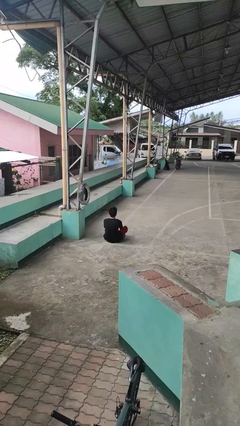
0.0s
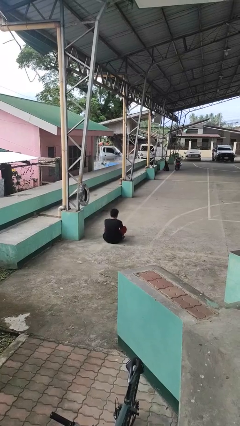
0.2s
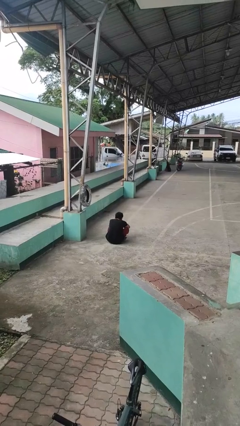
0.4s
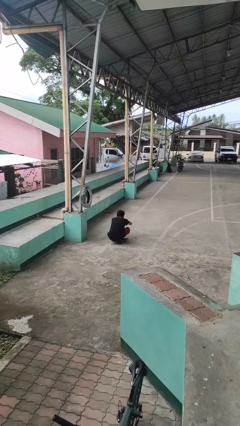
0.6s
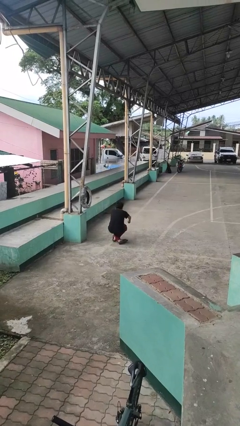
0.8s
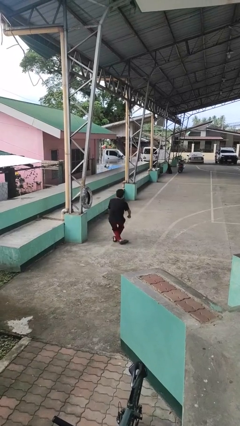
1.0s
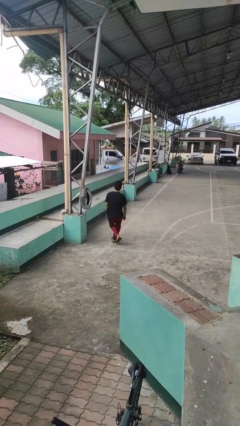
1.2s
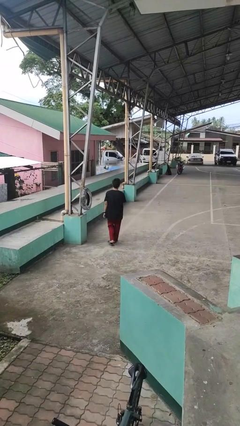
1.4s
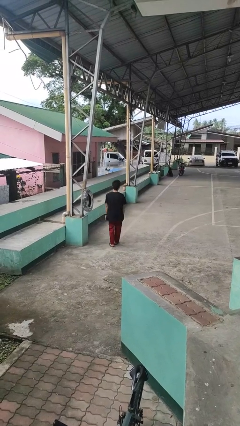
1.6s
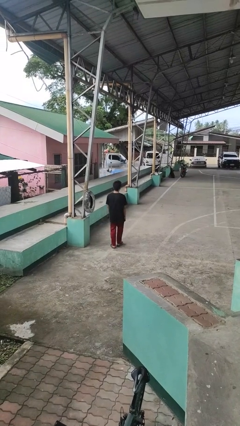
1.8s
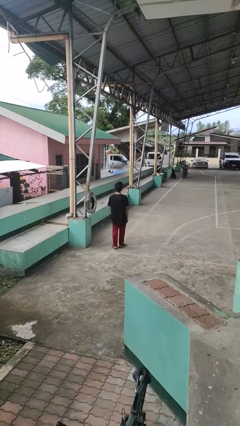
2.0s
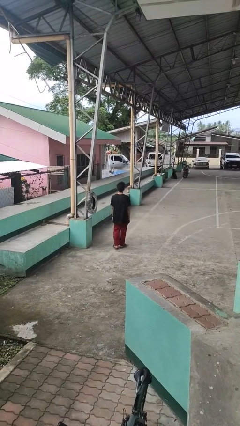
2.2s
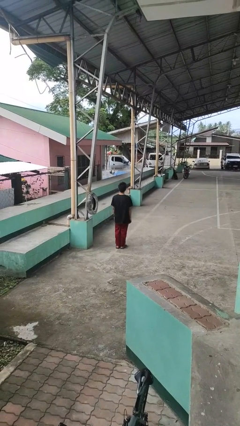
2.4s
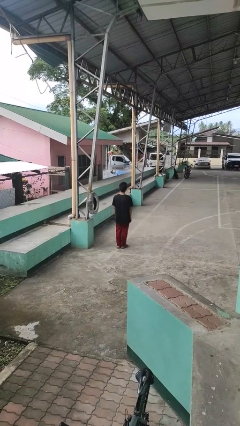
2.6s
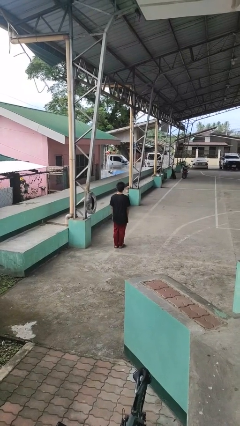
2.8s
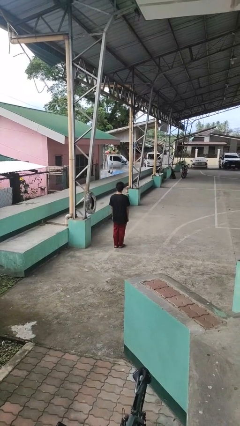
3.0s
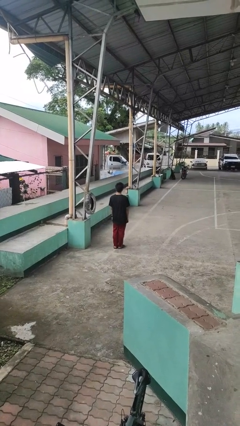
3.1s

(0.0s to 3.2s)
person stands up from floor

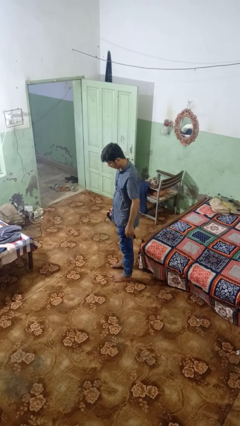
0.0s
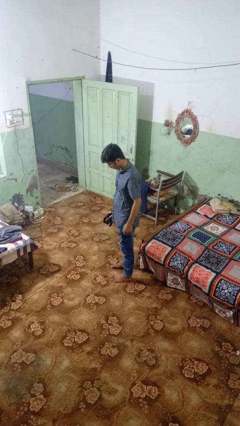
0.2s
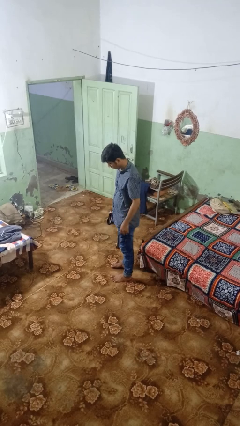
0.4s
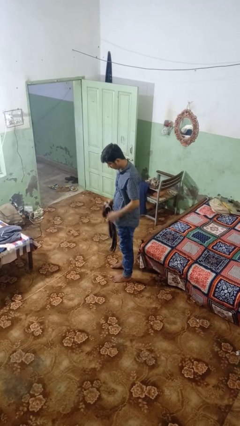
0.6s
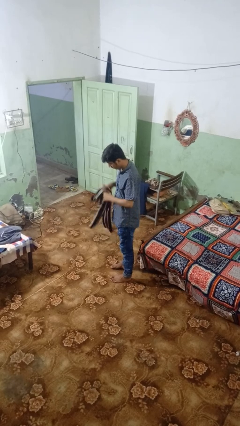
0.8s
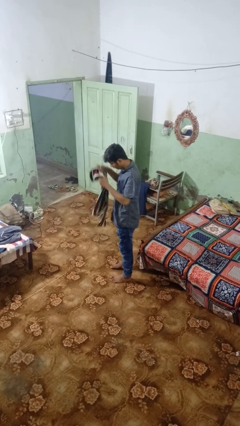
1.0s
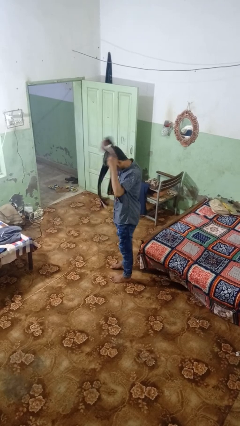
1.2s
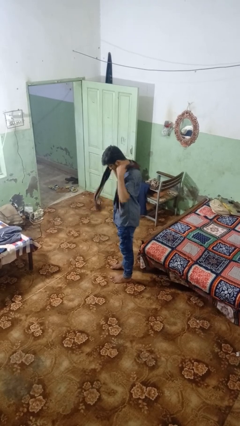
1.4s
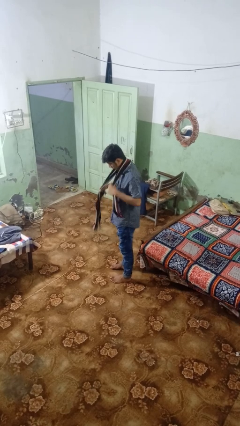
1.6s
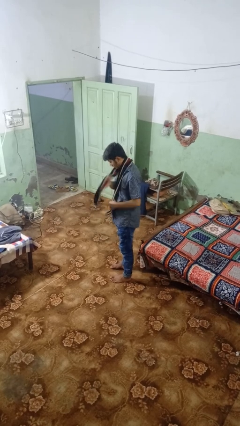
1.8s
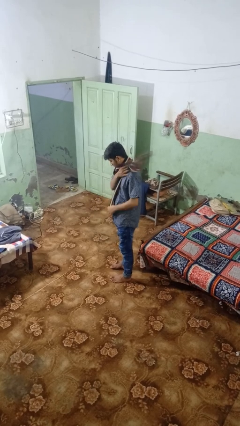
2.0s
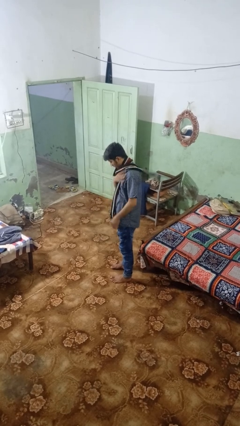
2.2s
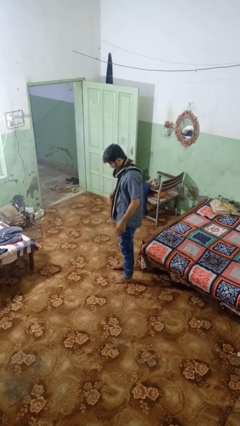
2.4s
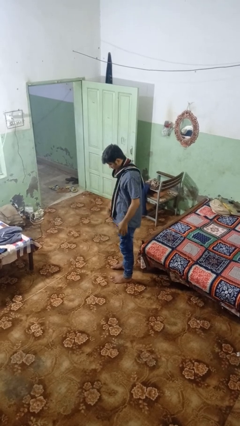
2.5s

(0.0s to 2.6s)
person puts on scarf

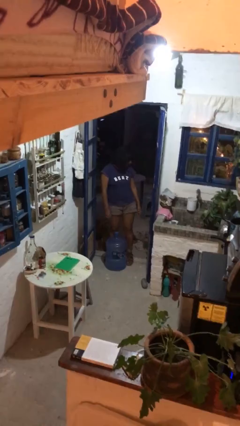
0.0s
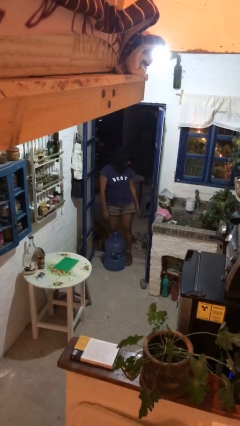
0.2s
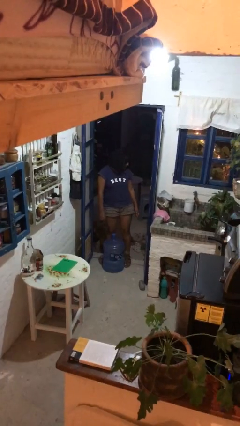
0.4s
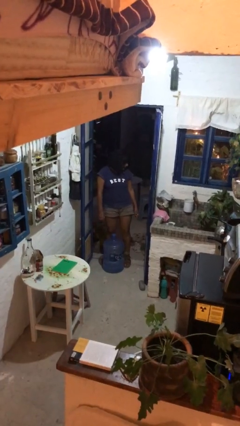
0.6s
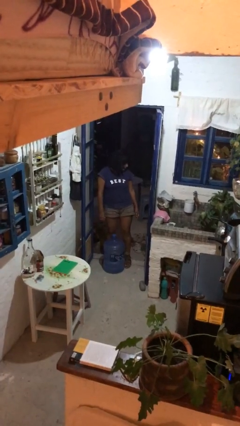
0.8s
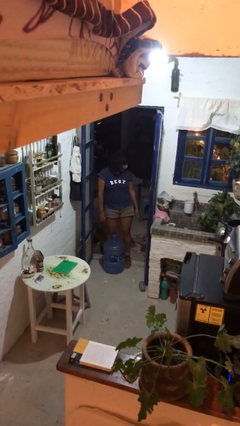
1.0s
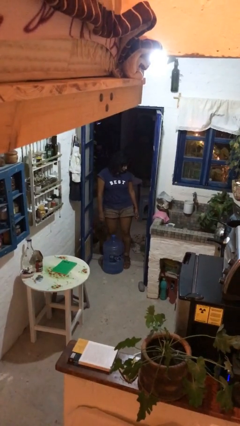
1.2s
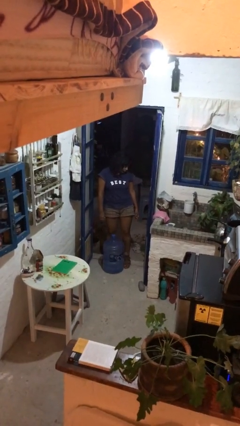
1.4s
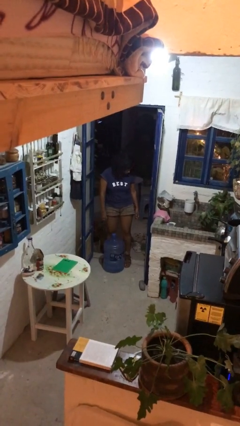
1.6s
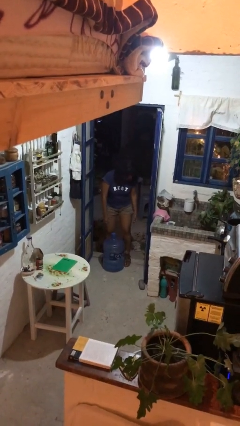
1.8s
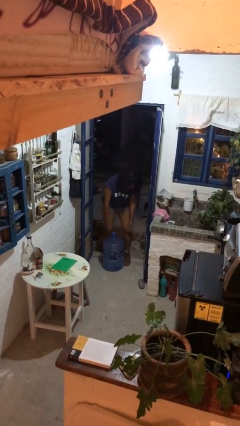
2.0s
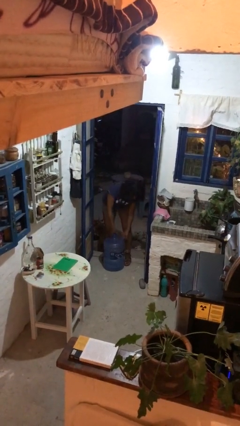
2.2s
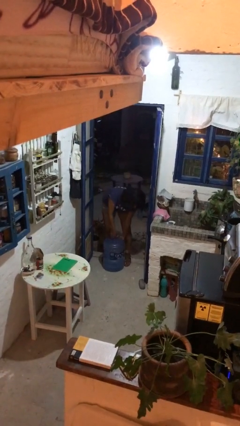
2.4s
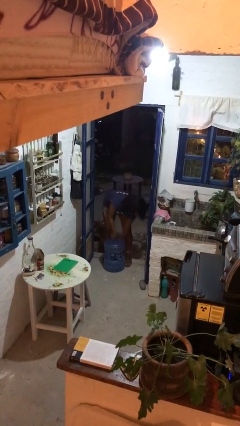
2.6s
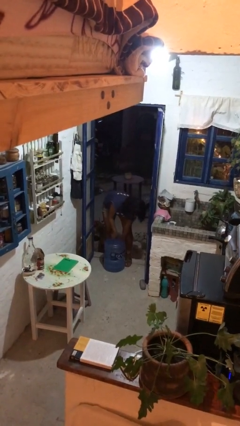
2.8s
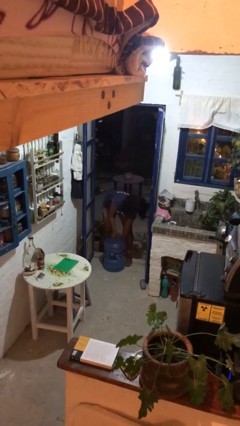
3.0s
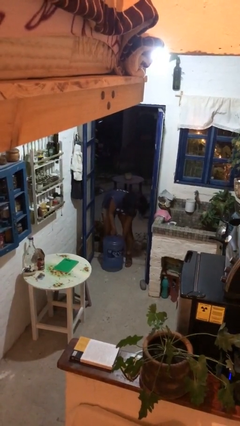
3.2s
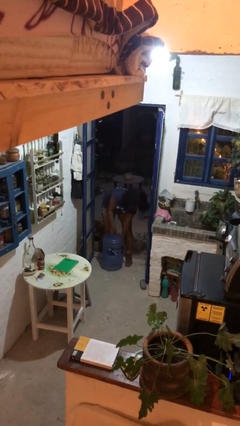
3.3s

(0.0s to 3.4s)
person picks up object from floor

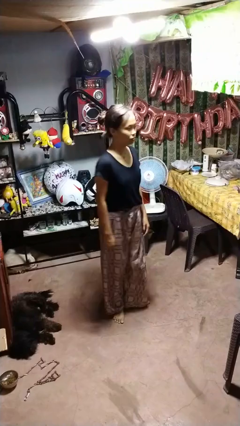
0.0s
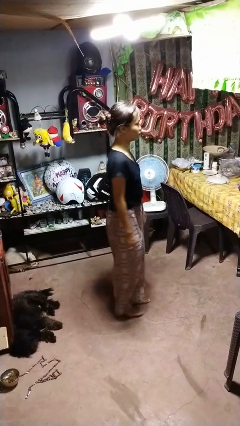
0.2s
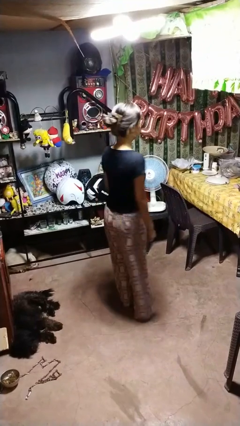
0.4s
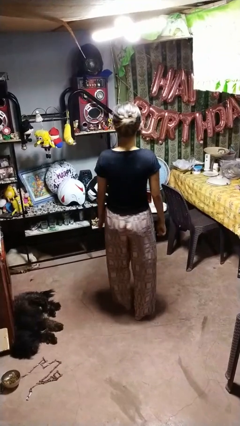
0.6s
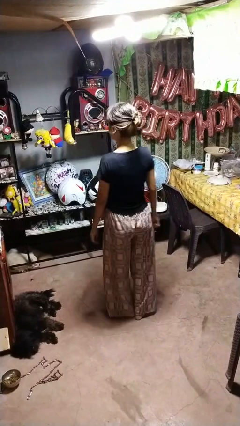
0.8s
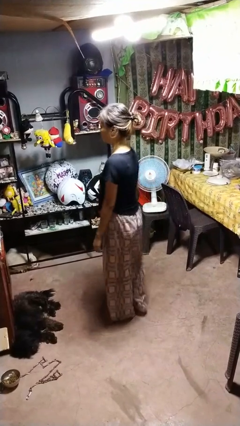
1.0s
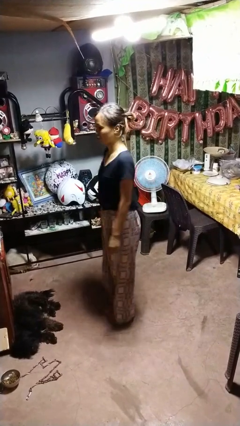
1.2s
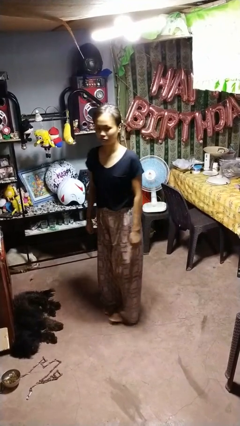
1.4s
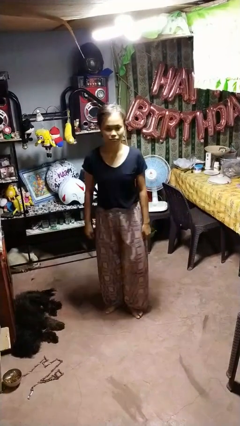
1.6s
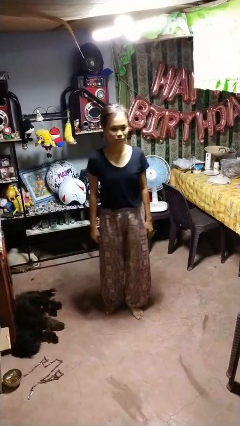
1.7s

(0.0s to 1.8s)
person twirls

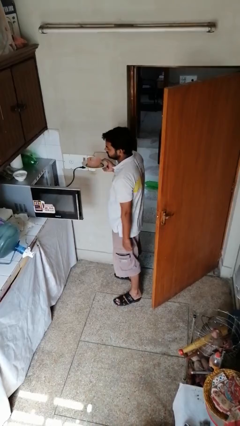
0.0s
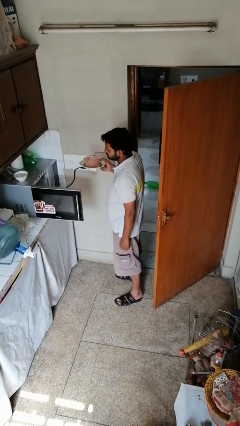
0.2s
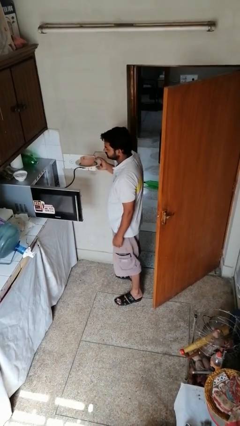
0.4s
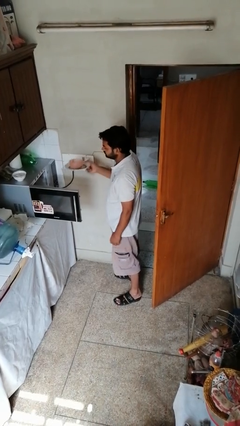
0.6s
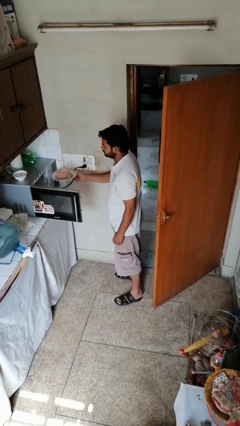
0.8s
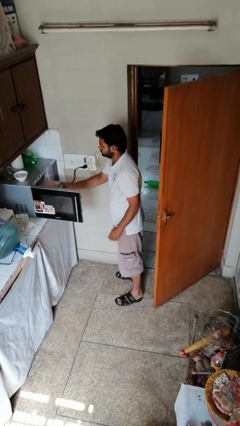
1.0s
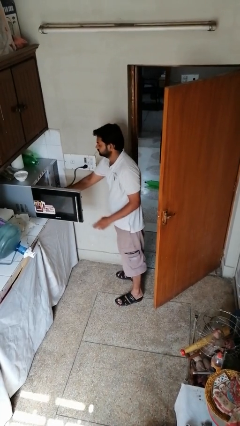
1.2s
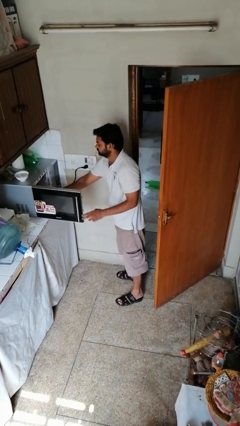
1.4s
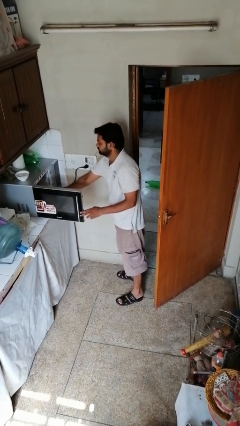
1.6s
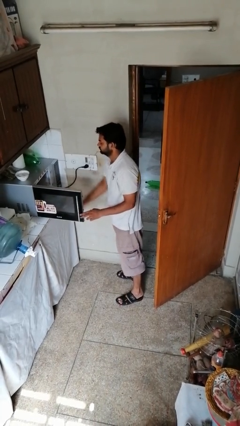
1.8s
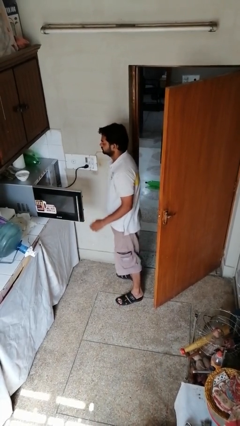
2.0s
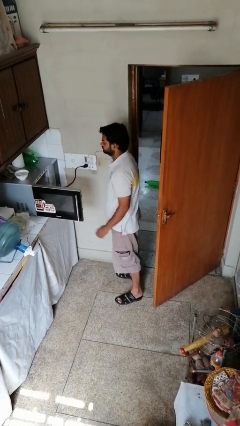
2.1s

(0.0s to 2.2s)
person puts object into microwave

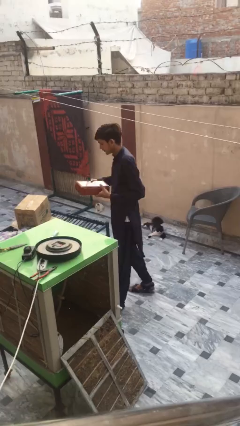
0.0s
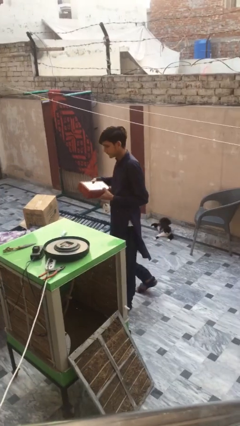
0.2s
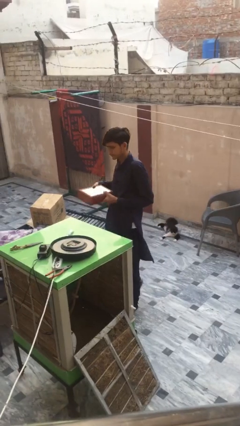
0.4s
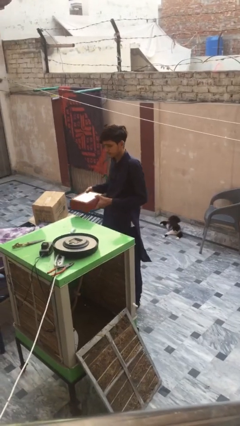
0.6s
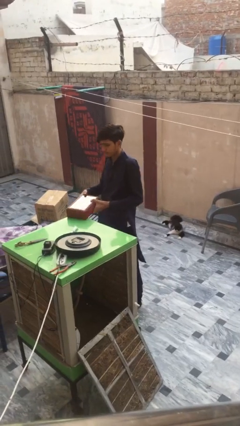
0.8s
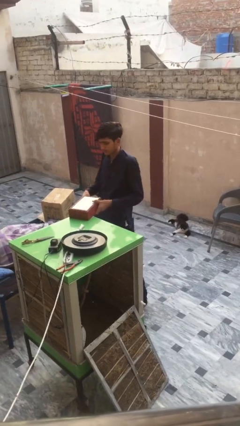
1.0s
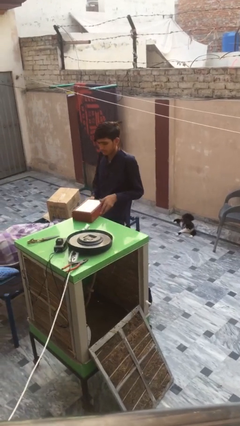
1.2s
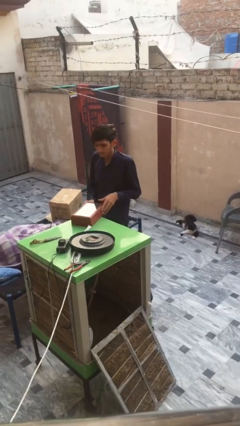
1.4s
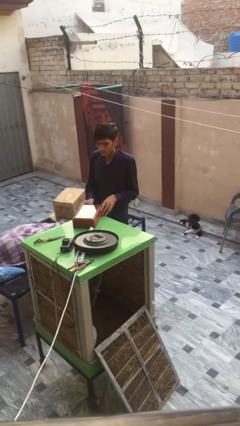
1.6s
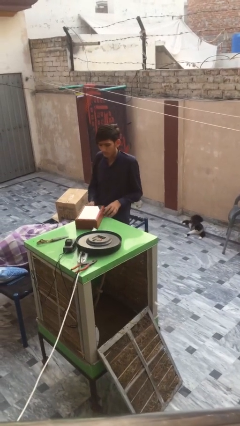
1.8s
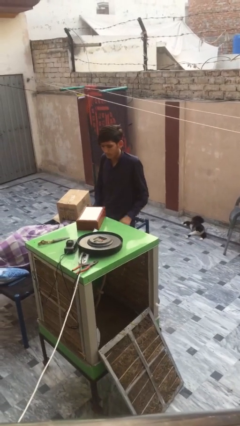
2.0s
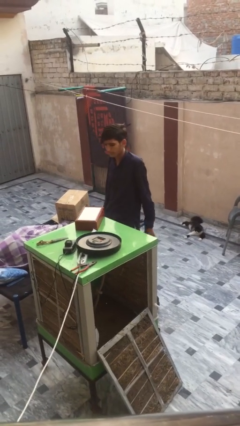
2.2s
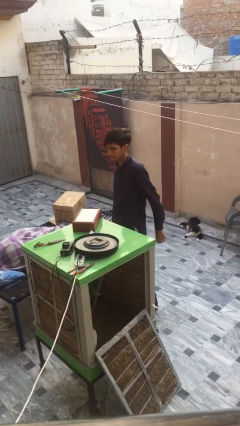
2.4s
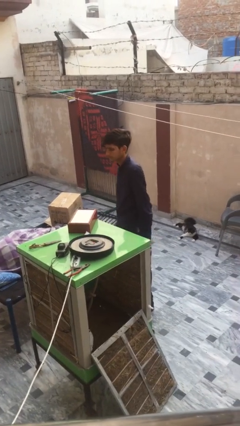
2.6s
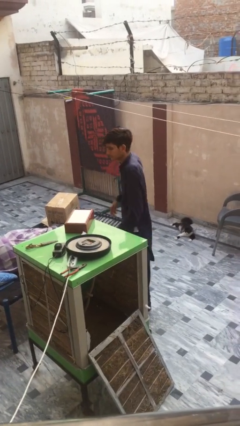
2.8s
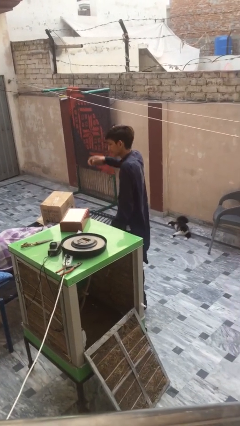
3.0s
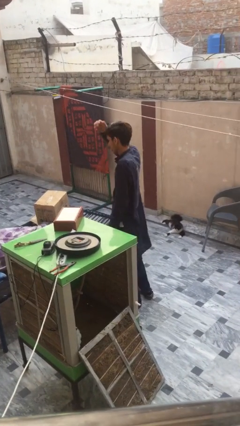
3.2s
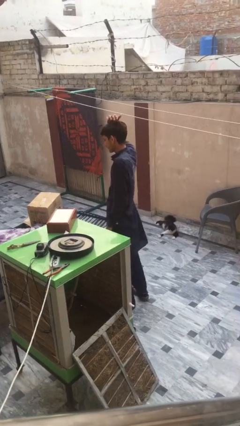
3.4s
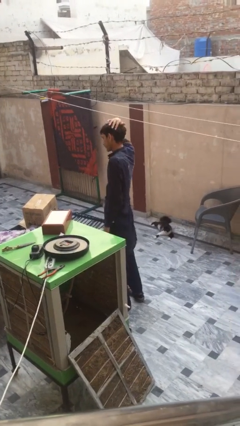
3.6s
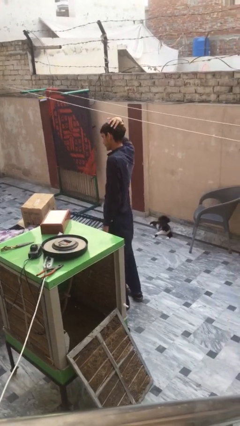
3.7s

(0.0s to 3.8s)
person puts down object on table

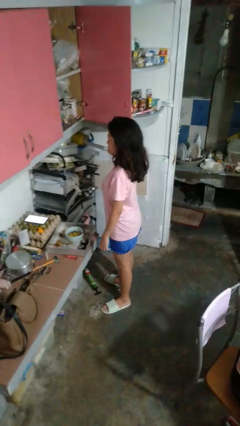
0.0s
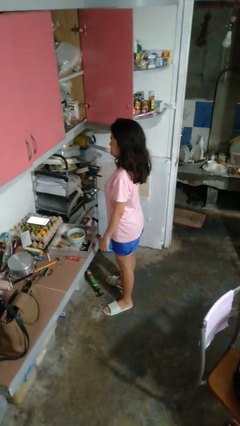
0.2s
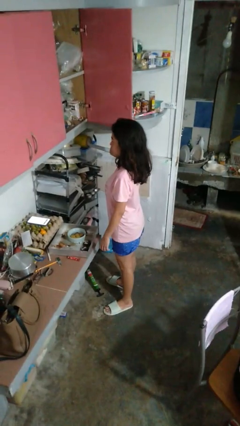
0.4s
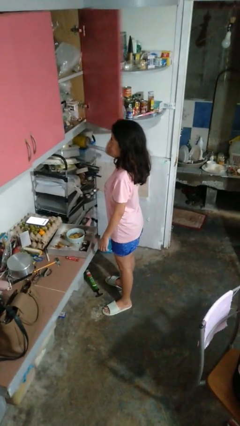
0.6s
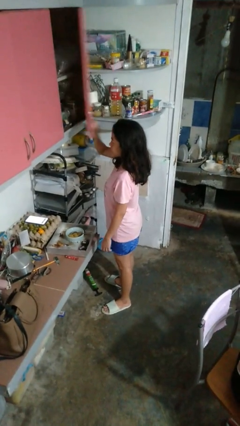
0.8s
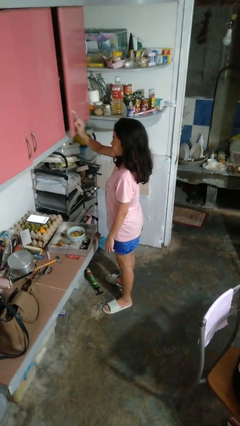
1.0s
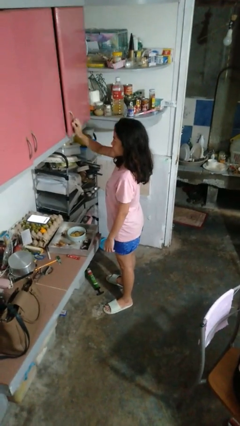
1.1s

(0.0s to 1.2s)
person closes cabinet
